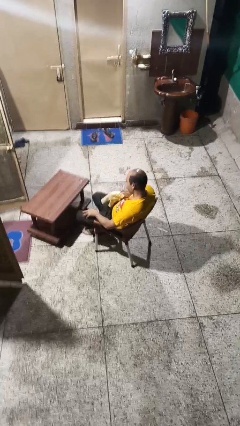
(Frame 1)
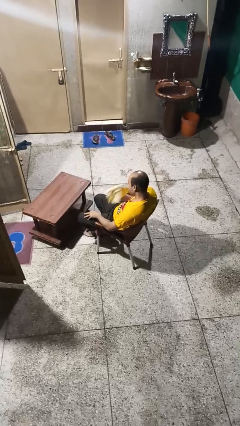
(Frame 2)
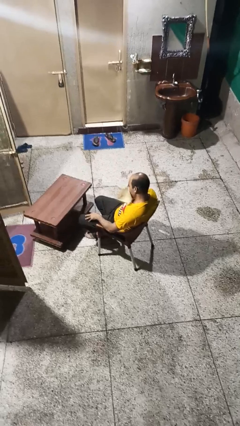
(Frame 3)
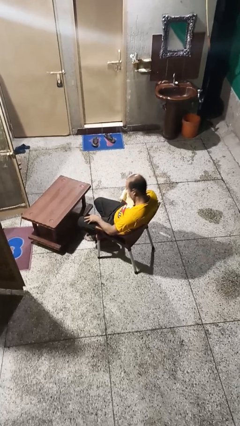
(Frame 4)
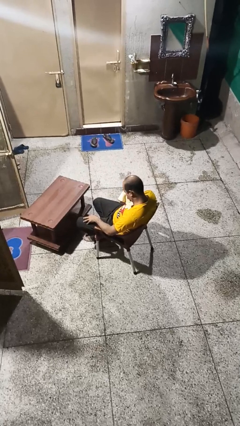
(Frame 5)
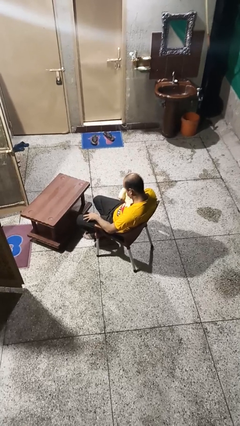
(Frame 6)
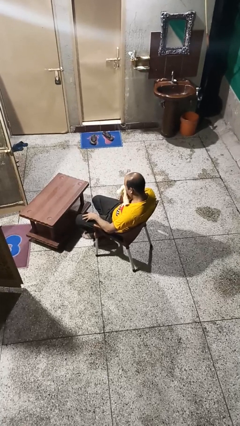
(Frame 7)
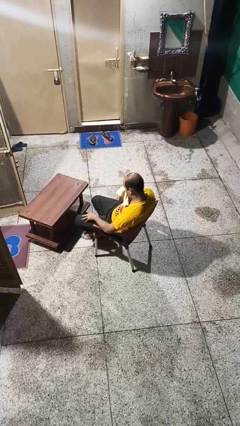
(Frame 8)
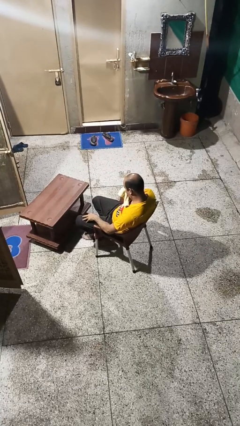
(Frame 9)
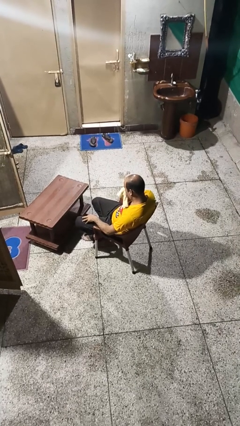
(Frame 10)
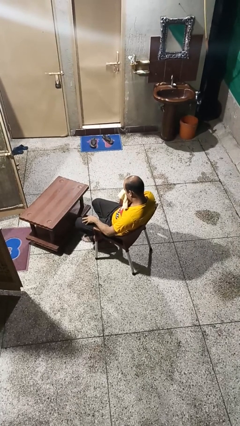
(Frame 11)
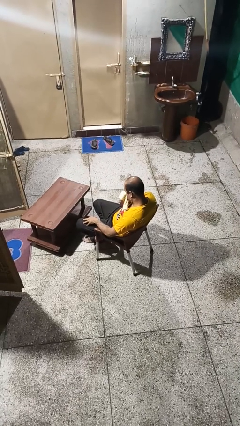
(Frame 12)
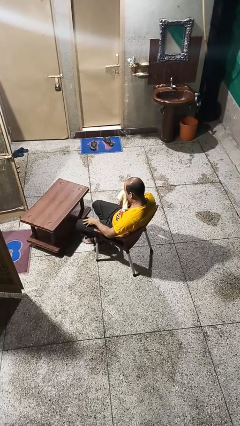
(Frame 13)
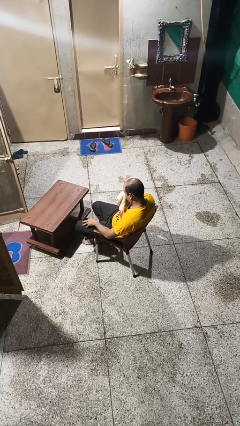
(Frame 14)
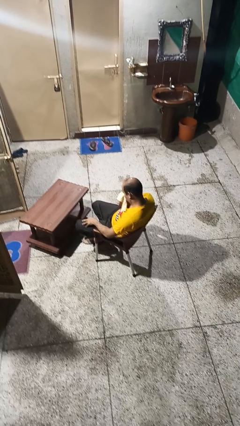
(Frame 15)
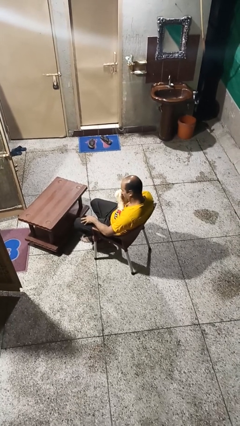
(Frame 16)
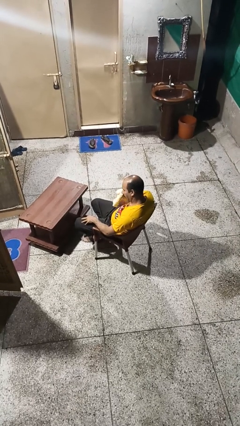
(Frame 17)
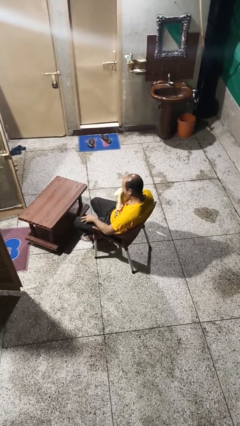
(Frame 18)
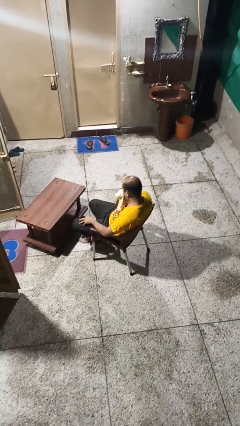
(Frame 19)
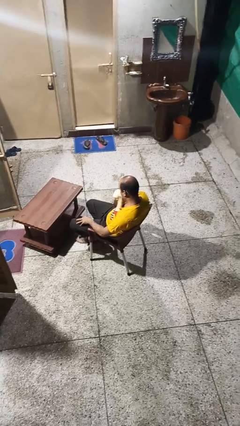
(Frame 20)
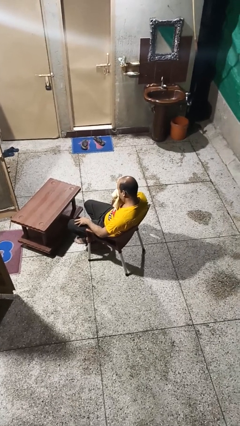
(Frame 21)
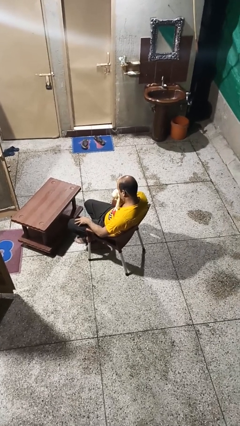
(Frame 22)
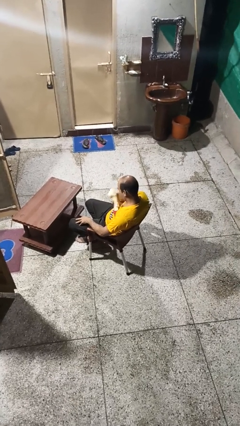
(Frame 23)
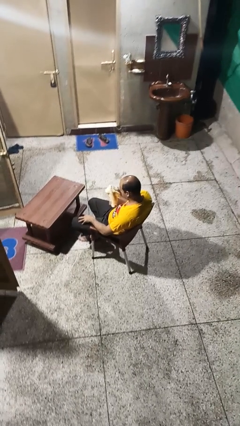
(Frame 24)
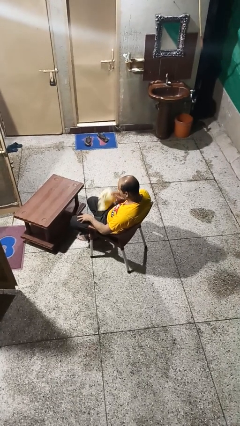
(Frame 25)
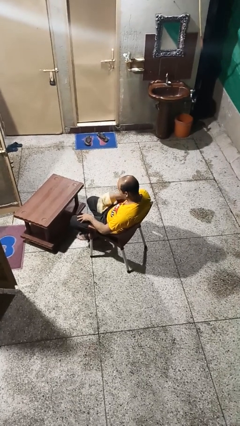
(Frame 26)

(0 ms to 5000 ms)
person blows nose

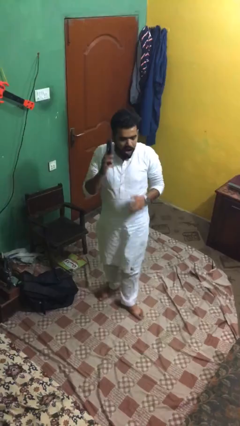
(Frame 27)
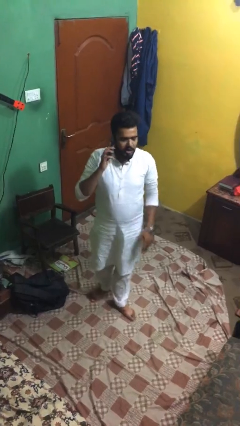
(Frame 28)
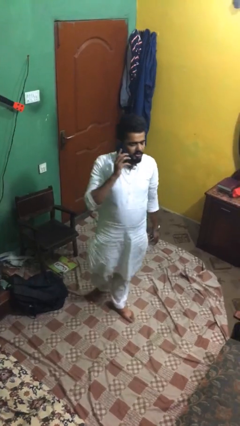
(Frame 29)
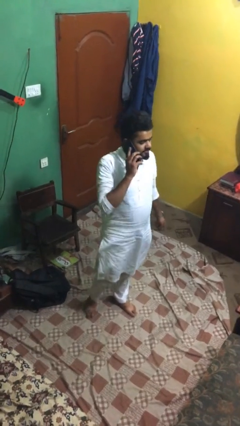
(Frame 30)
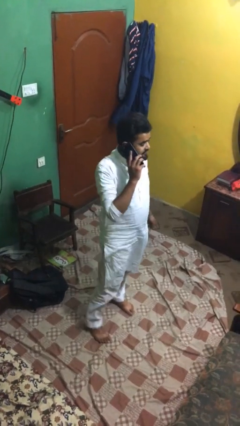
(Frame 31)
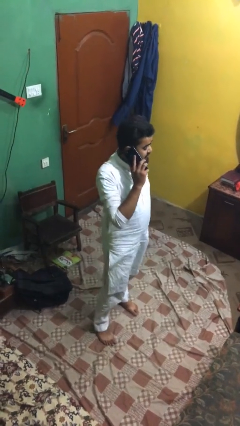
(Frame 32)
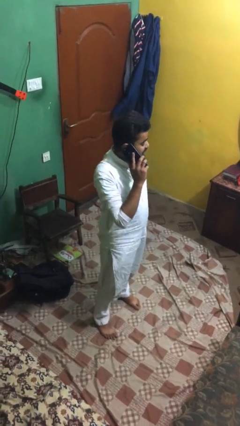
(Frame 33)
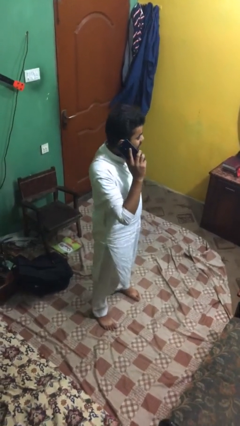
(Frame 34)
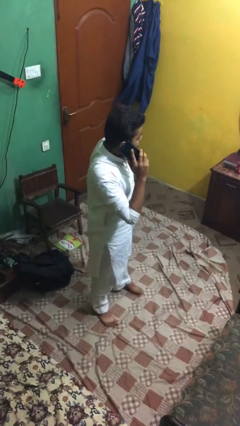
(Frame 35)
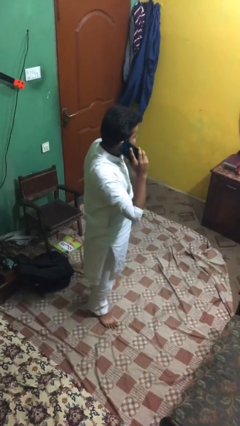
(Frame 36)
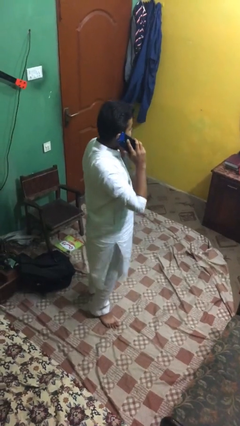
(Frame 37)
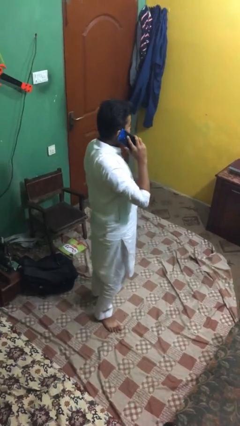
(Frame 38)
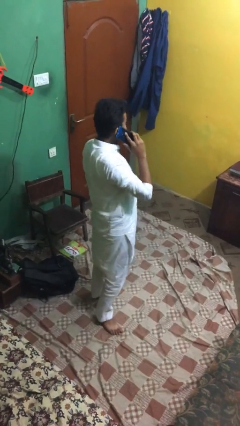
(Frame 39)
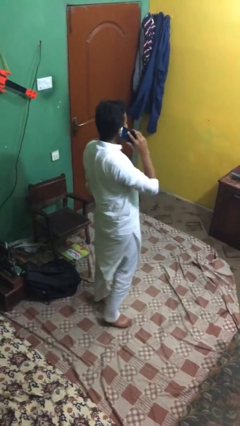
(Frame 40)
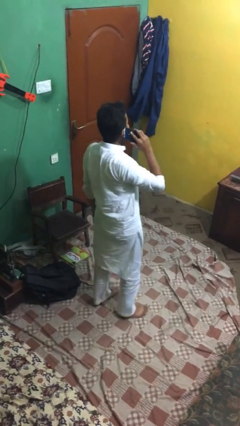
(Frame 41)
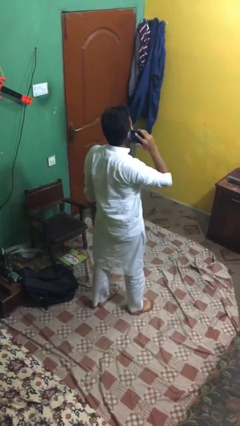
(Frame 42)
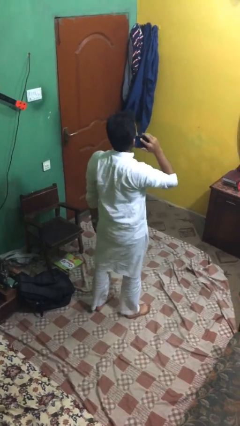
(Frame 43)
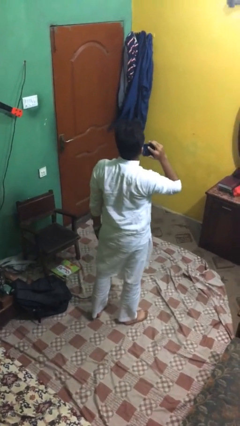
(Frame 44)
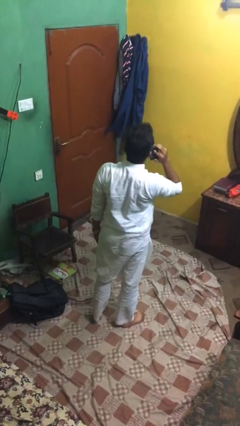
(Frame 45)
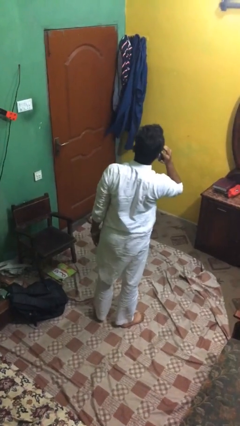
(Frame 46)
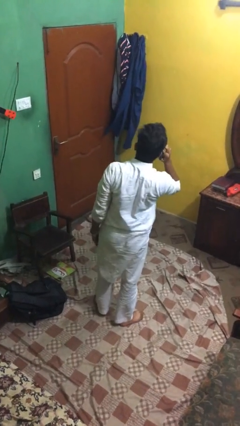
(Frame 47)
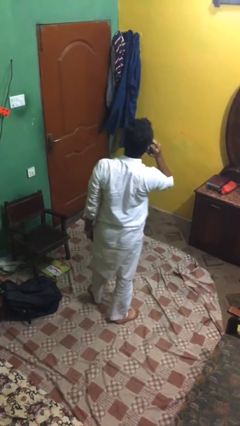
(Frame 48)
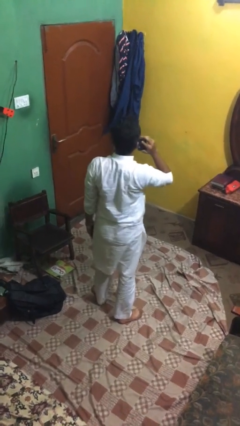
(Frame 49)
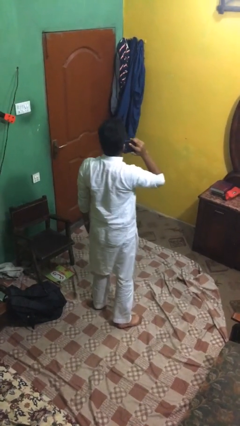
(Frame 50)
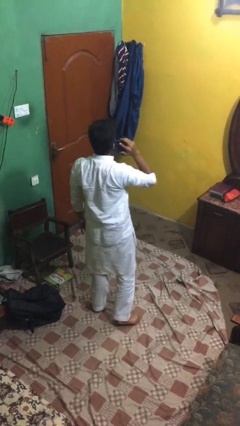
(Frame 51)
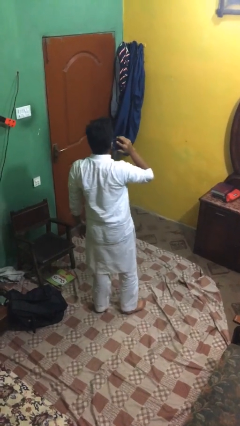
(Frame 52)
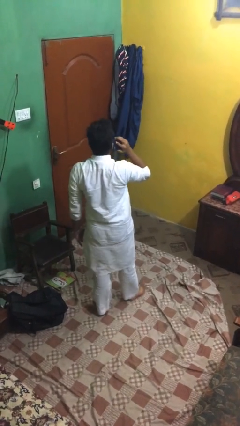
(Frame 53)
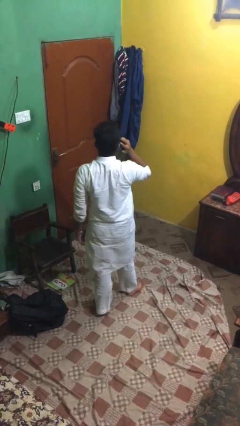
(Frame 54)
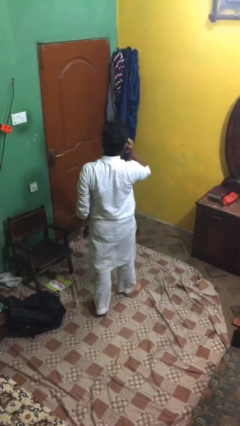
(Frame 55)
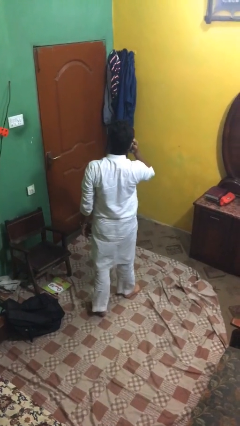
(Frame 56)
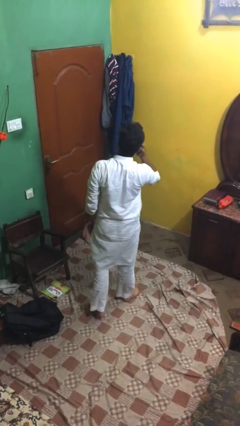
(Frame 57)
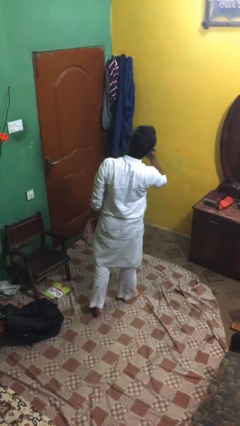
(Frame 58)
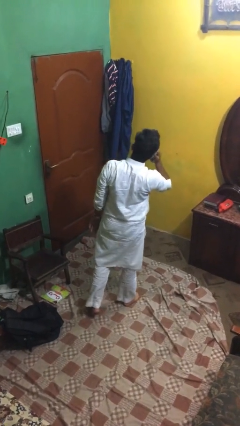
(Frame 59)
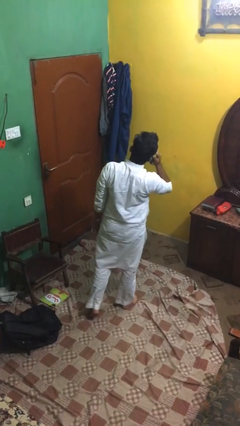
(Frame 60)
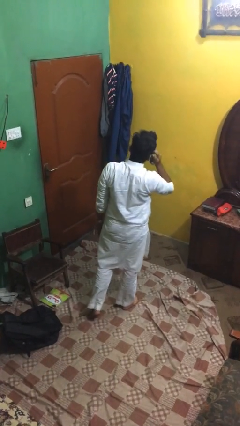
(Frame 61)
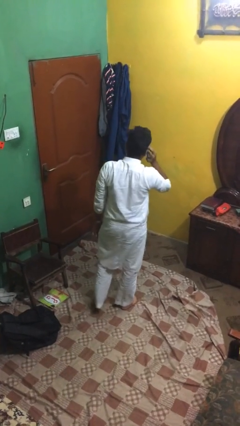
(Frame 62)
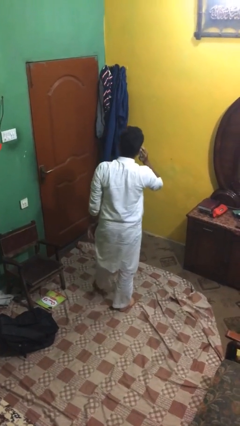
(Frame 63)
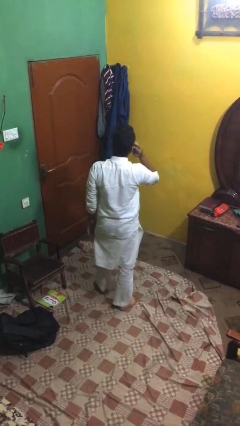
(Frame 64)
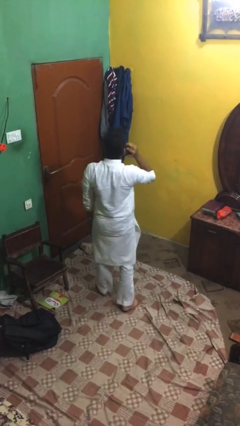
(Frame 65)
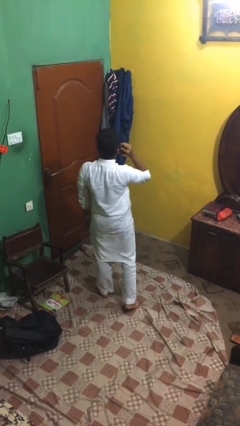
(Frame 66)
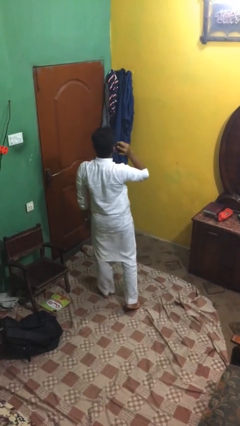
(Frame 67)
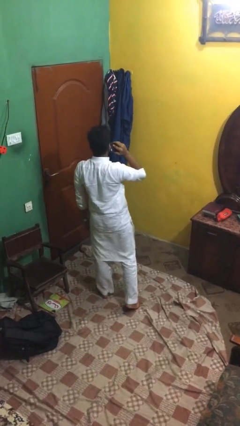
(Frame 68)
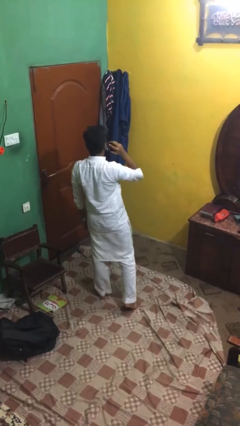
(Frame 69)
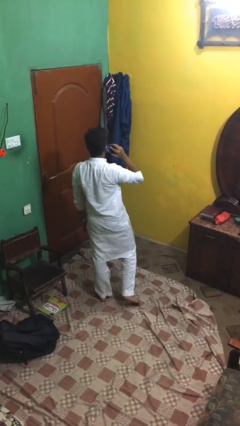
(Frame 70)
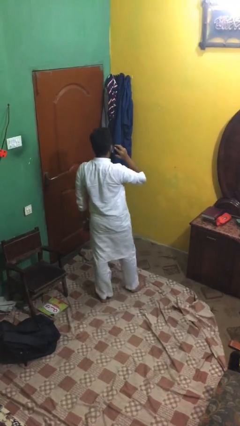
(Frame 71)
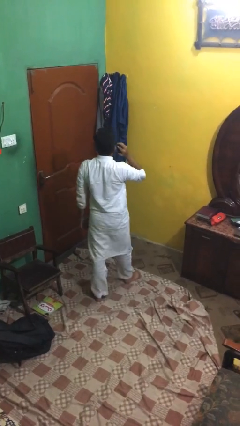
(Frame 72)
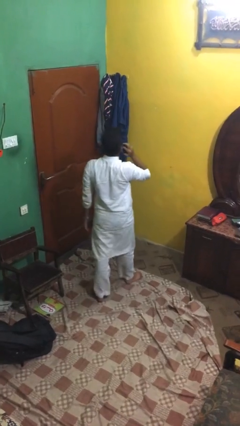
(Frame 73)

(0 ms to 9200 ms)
person talks on phone

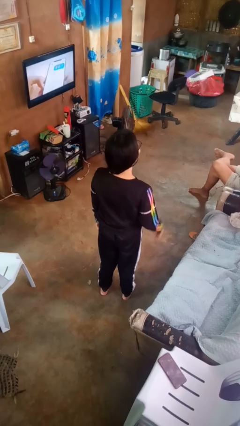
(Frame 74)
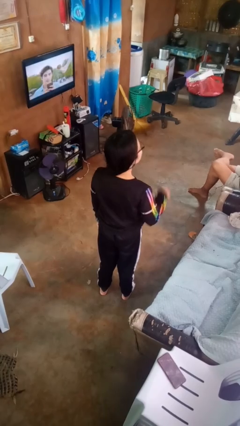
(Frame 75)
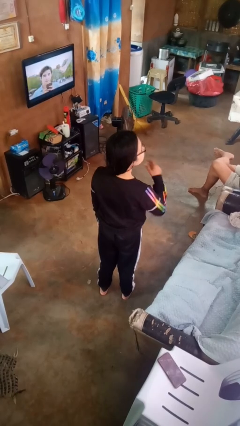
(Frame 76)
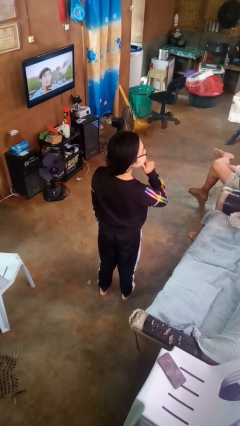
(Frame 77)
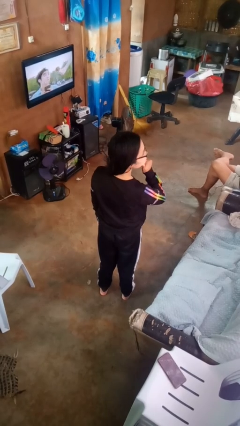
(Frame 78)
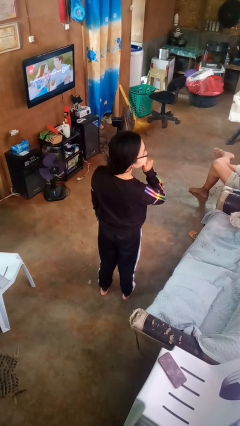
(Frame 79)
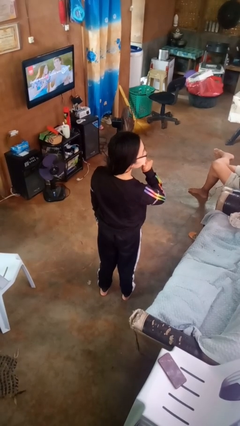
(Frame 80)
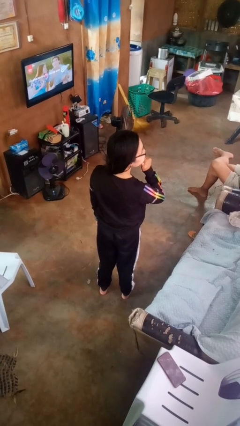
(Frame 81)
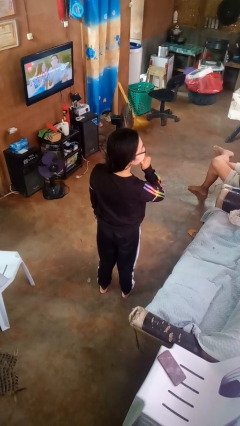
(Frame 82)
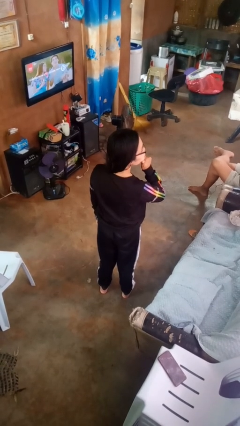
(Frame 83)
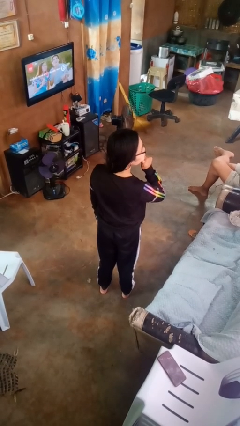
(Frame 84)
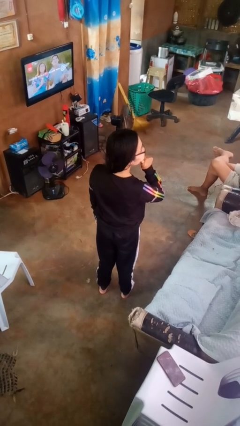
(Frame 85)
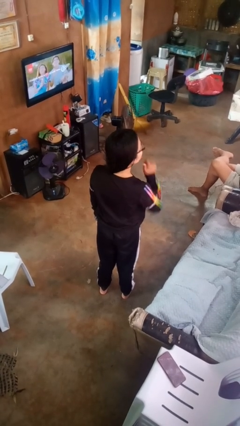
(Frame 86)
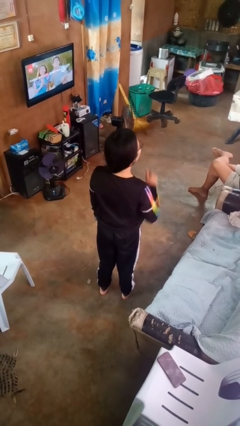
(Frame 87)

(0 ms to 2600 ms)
person strokes chin

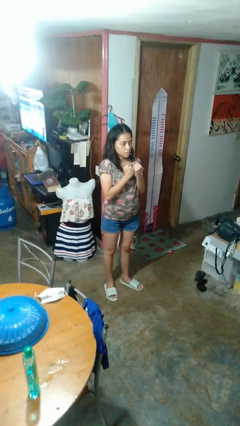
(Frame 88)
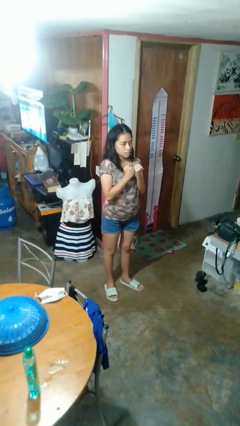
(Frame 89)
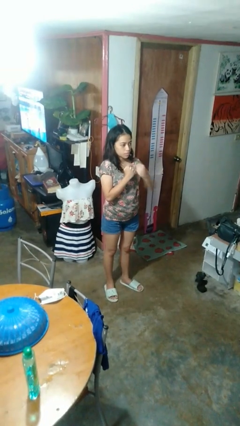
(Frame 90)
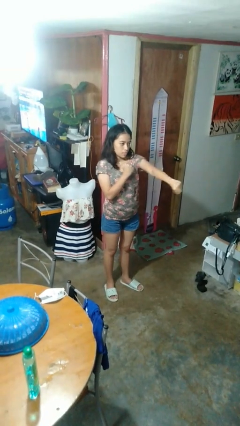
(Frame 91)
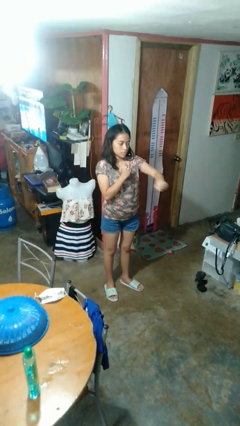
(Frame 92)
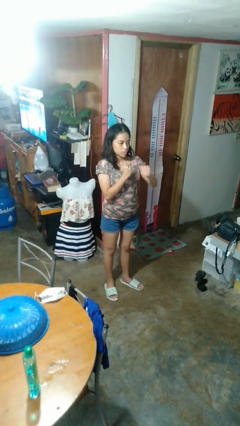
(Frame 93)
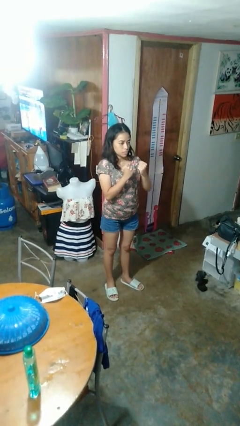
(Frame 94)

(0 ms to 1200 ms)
person punches
